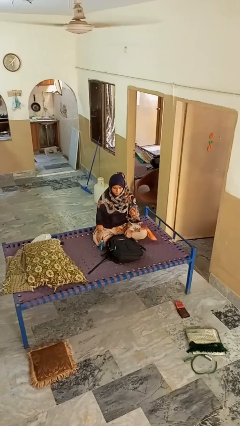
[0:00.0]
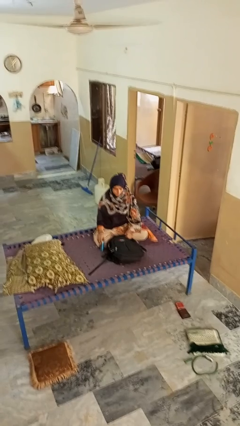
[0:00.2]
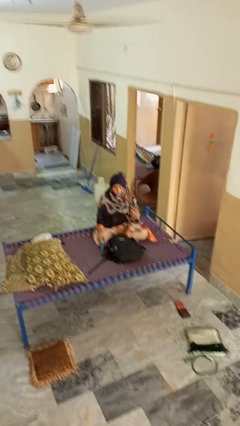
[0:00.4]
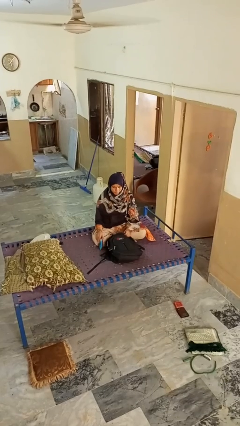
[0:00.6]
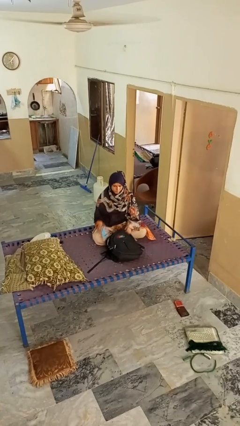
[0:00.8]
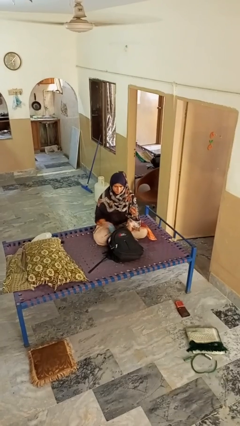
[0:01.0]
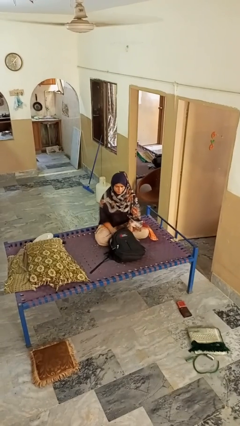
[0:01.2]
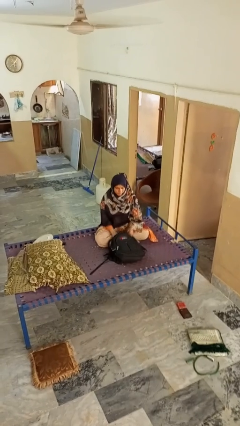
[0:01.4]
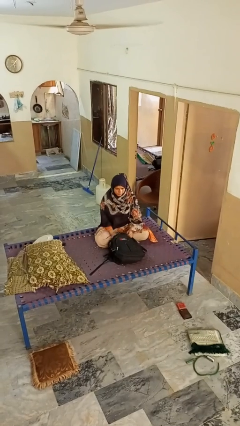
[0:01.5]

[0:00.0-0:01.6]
person puts object into bag

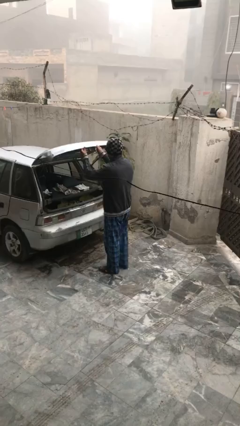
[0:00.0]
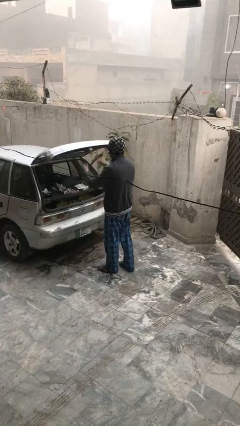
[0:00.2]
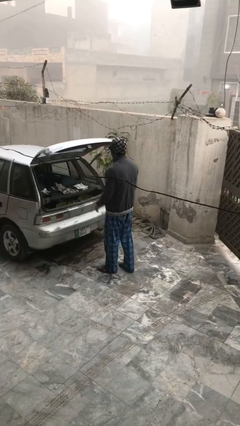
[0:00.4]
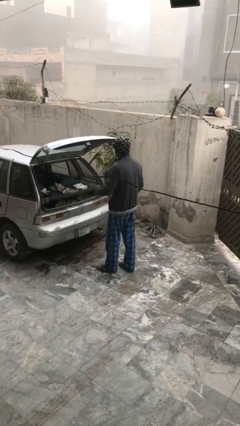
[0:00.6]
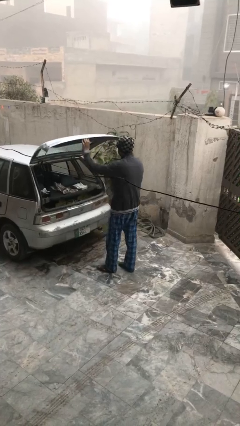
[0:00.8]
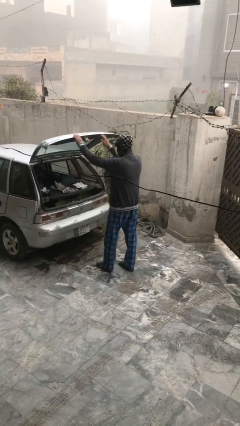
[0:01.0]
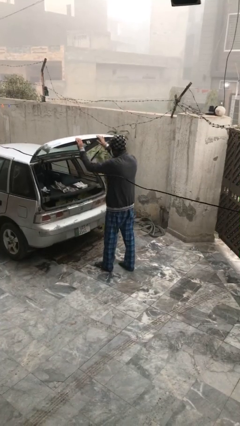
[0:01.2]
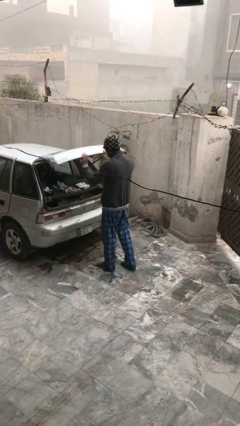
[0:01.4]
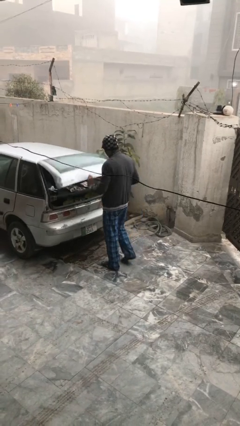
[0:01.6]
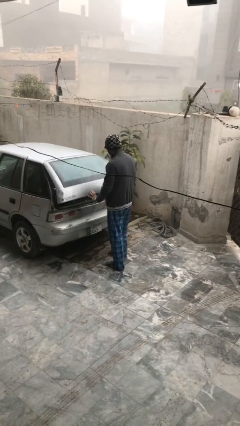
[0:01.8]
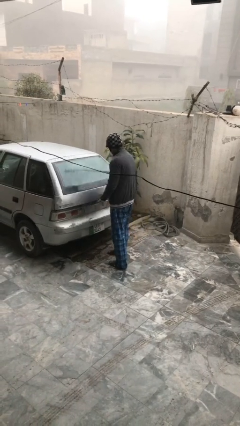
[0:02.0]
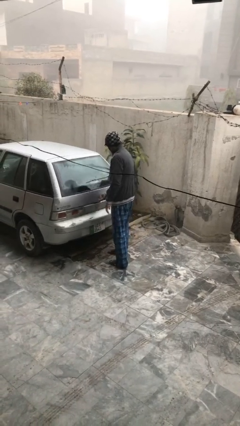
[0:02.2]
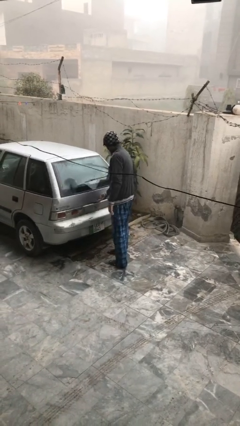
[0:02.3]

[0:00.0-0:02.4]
person closes car trunk

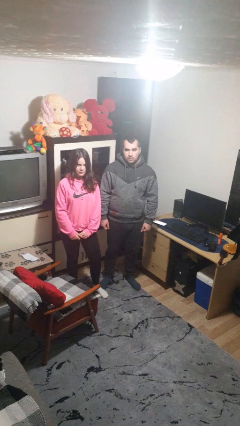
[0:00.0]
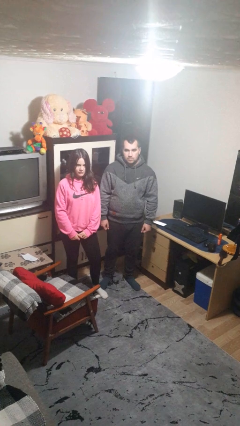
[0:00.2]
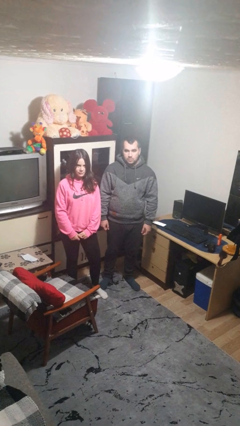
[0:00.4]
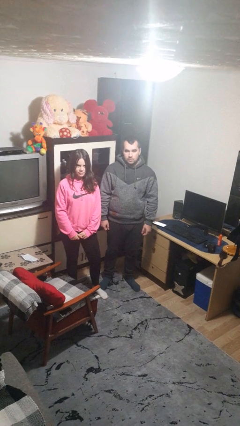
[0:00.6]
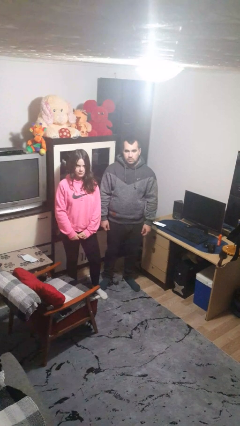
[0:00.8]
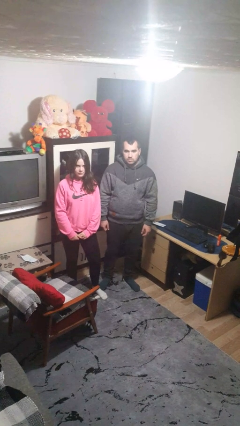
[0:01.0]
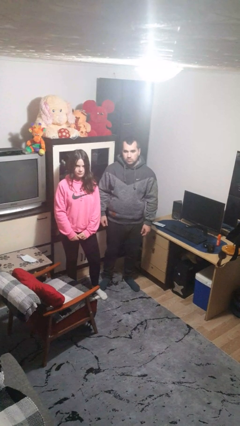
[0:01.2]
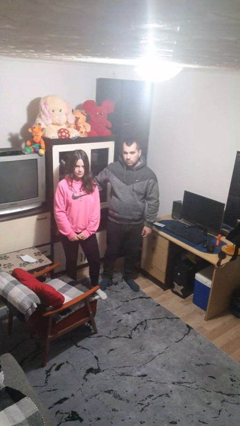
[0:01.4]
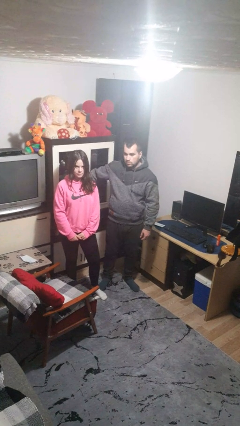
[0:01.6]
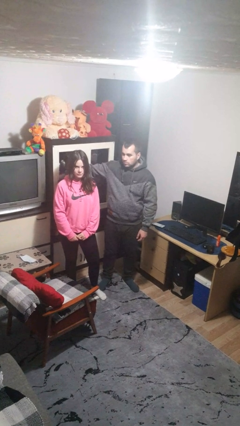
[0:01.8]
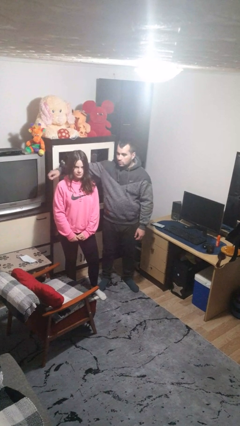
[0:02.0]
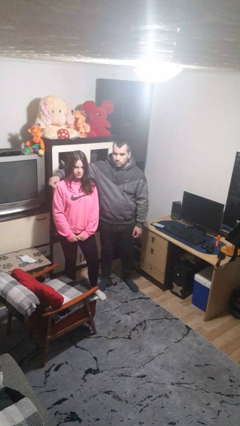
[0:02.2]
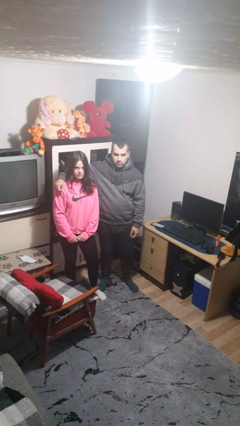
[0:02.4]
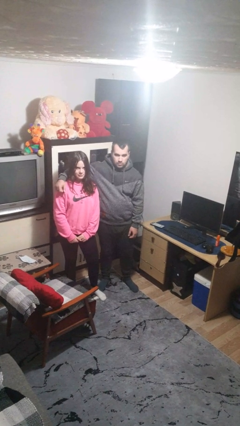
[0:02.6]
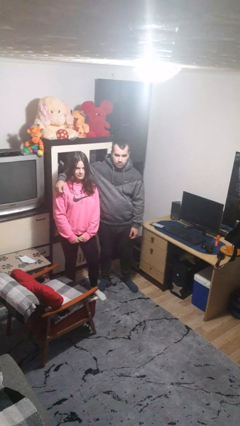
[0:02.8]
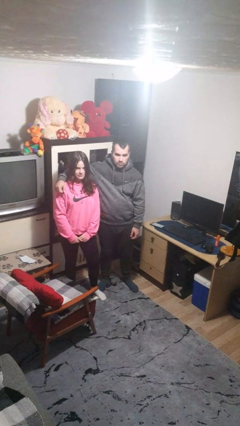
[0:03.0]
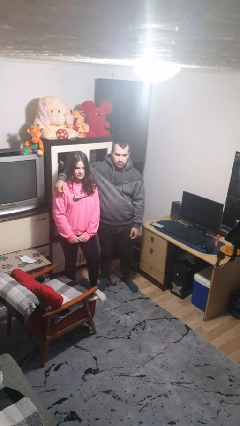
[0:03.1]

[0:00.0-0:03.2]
person hugs person from side

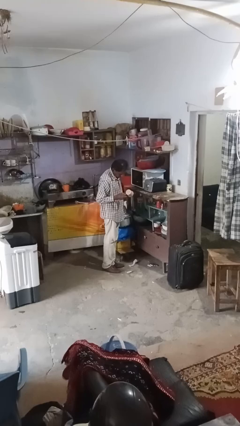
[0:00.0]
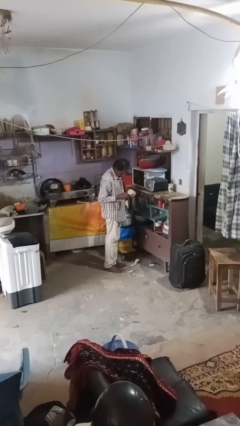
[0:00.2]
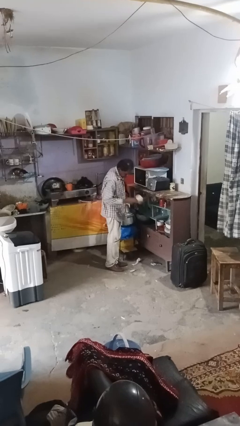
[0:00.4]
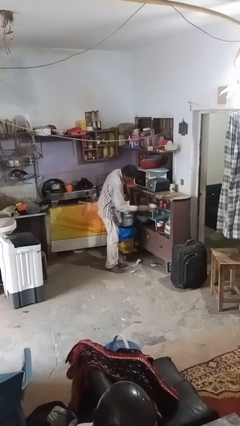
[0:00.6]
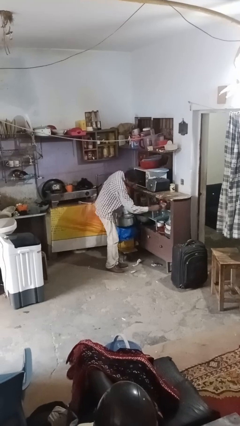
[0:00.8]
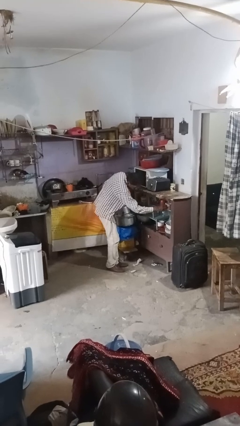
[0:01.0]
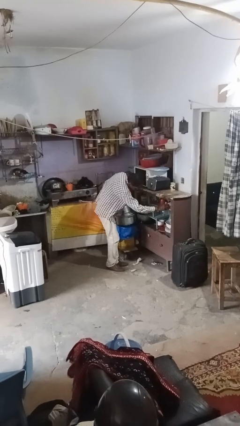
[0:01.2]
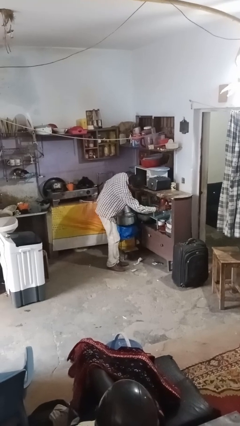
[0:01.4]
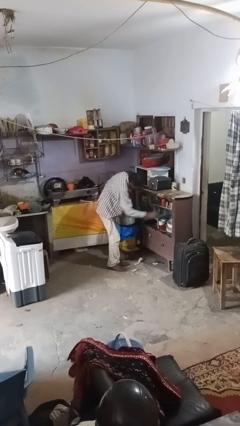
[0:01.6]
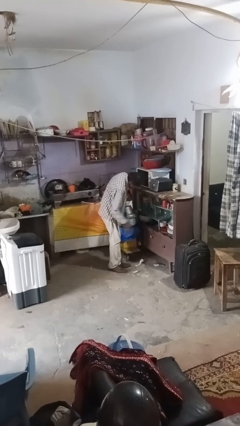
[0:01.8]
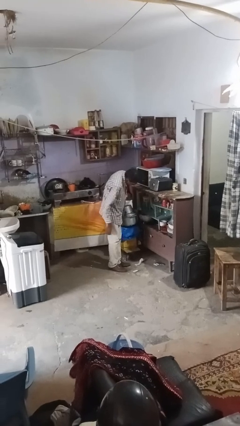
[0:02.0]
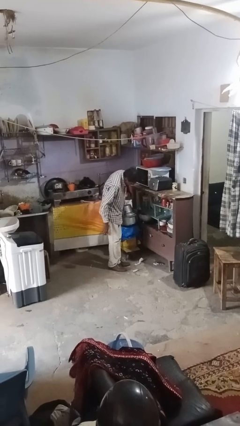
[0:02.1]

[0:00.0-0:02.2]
person puts object into kitchen drawer

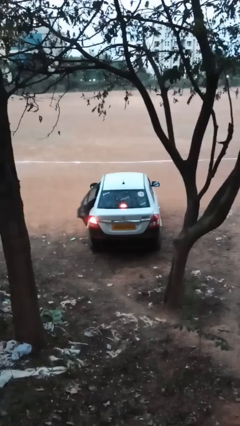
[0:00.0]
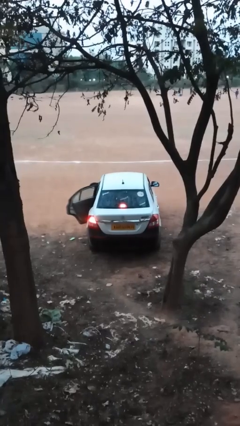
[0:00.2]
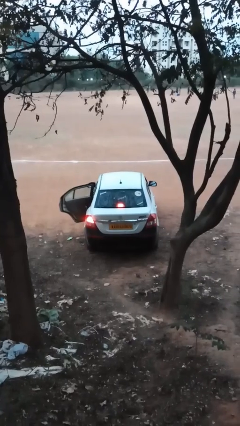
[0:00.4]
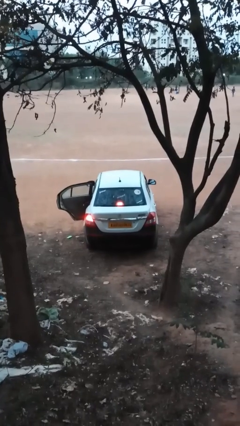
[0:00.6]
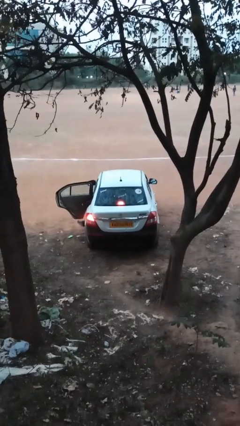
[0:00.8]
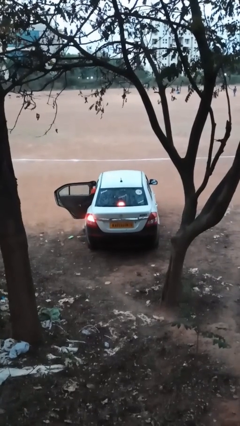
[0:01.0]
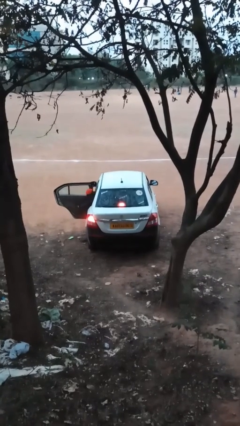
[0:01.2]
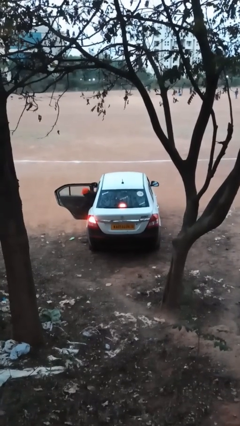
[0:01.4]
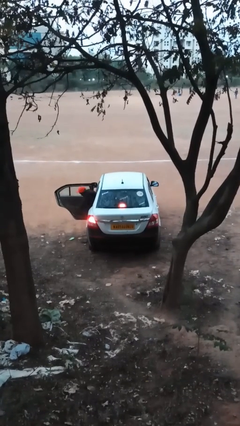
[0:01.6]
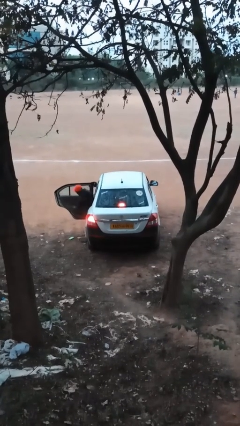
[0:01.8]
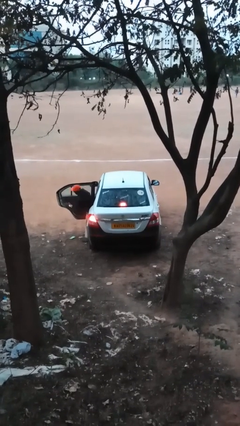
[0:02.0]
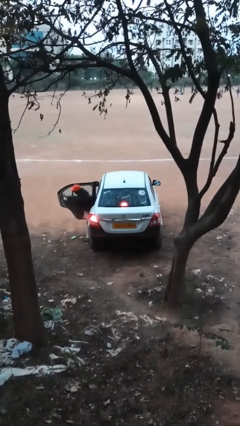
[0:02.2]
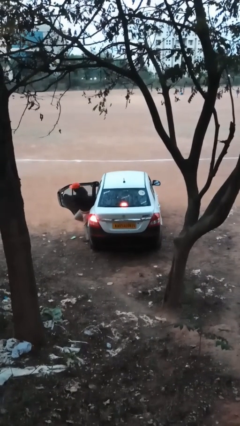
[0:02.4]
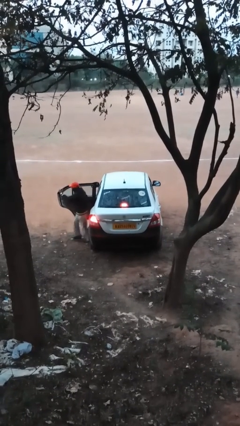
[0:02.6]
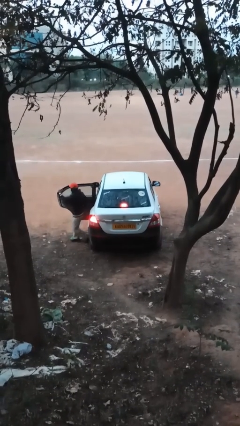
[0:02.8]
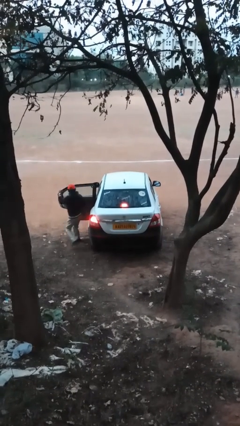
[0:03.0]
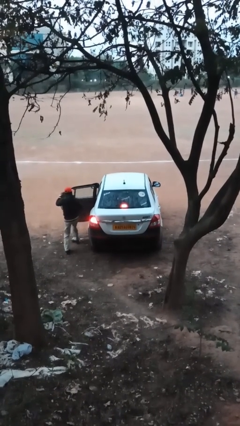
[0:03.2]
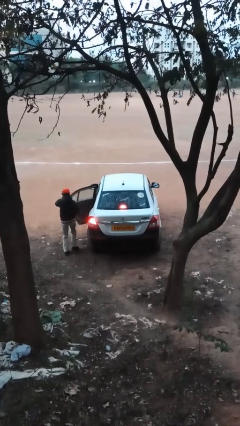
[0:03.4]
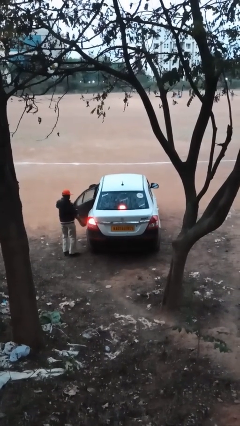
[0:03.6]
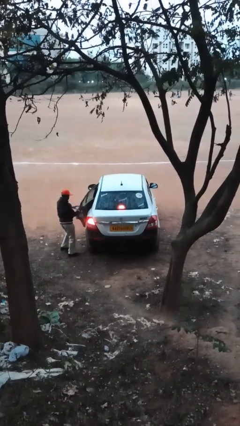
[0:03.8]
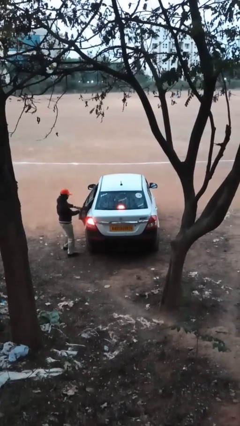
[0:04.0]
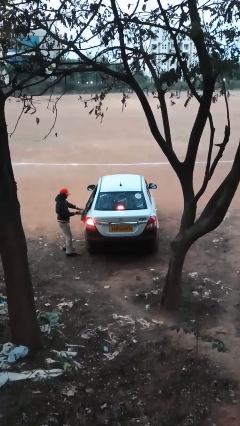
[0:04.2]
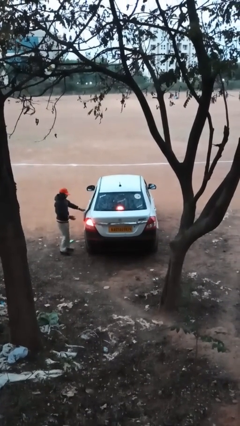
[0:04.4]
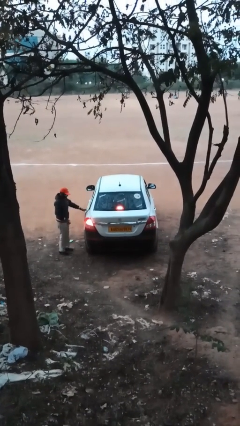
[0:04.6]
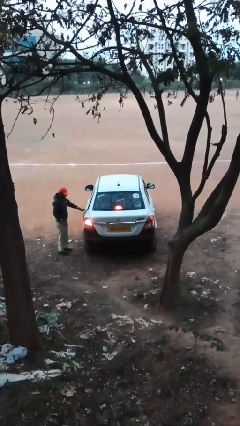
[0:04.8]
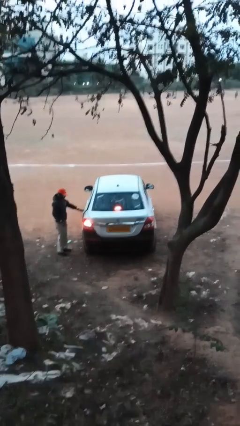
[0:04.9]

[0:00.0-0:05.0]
car drops off person

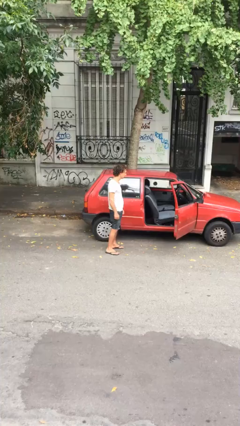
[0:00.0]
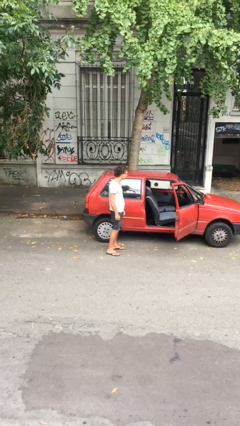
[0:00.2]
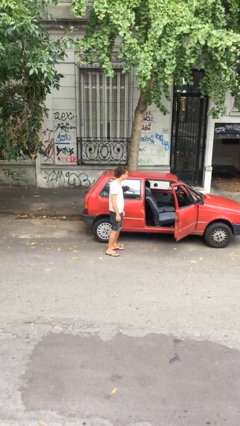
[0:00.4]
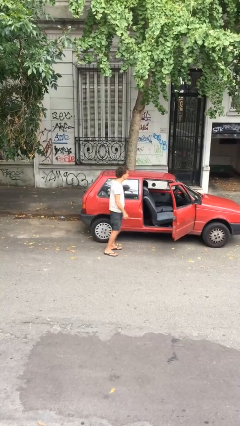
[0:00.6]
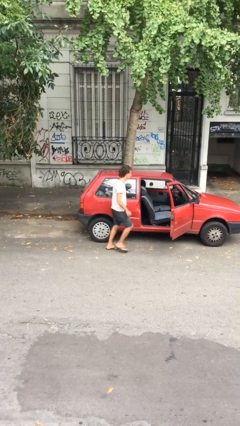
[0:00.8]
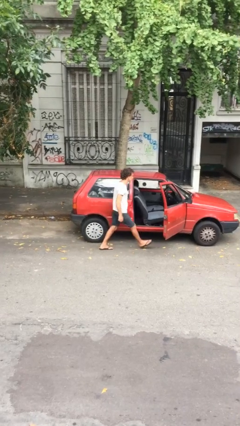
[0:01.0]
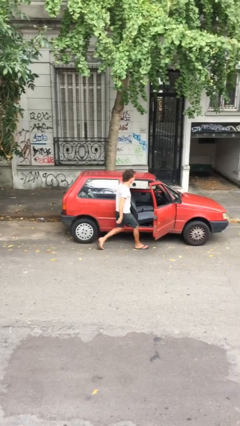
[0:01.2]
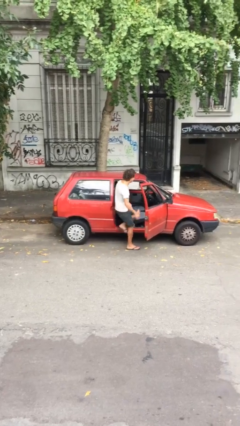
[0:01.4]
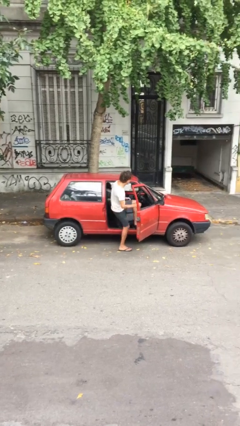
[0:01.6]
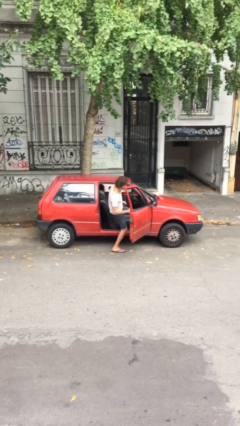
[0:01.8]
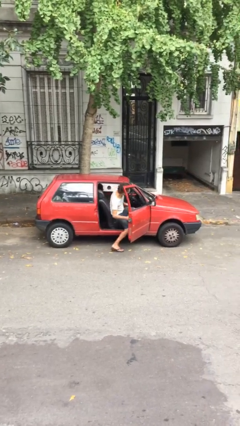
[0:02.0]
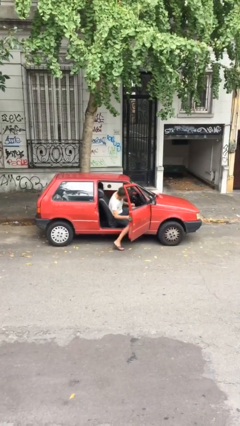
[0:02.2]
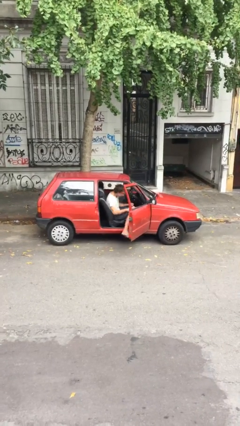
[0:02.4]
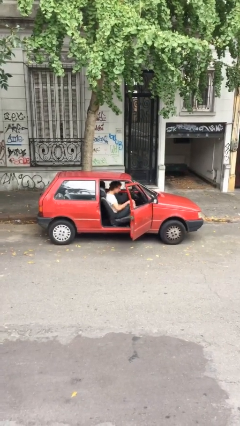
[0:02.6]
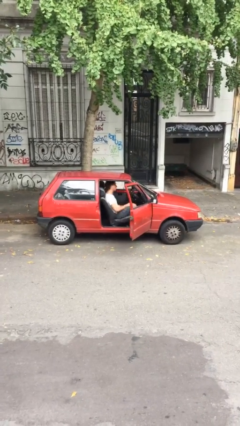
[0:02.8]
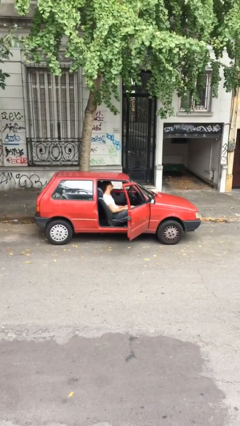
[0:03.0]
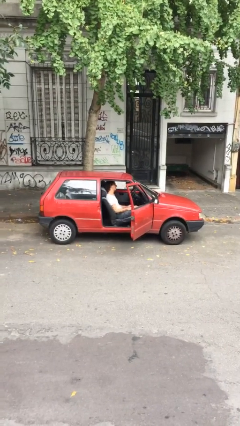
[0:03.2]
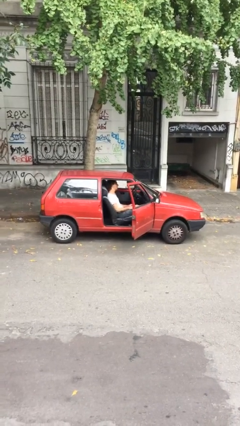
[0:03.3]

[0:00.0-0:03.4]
person enters car
